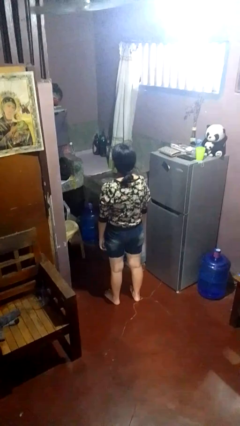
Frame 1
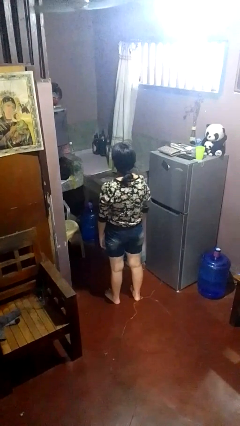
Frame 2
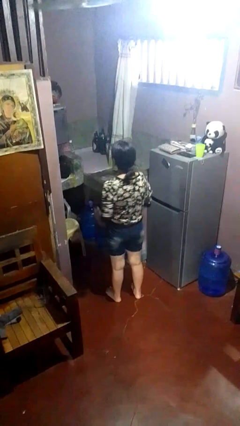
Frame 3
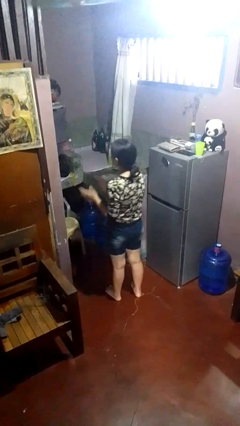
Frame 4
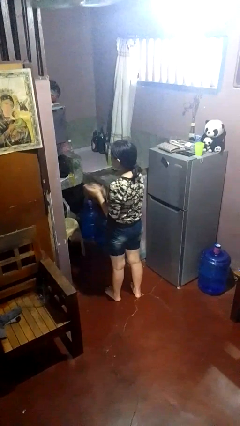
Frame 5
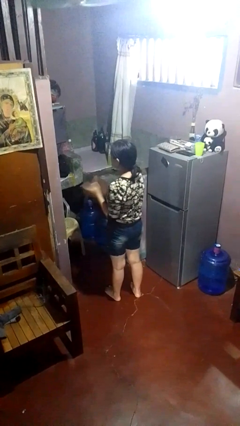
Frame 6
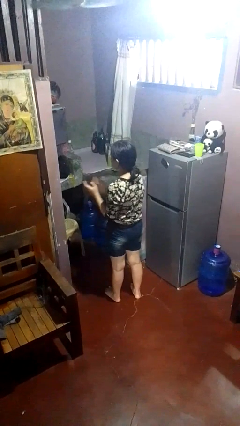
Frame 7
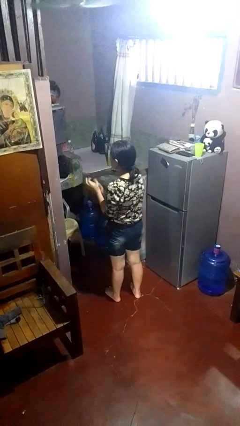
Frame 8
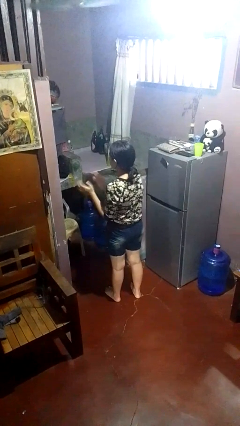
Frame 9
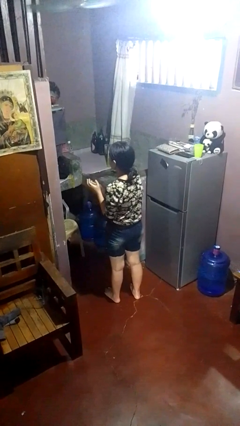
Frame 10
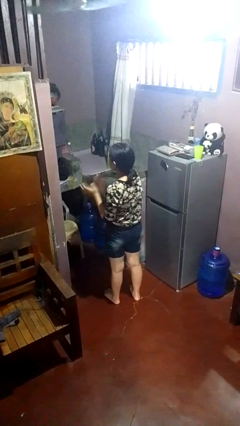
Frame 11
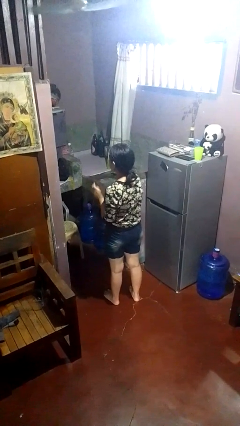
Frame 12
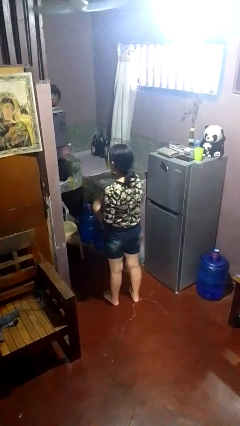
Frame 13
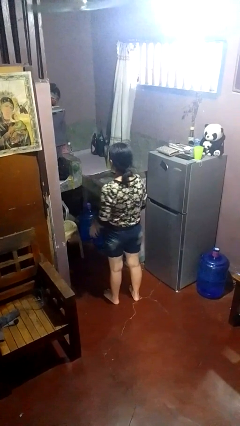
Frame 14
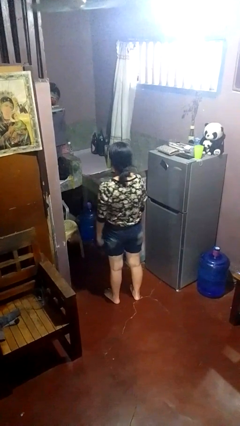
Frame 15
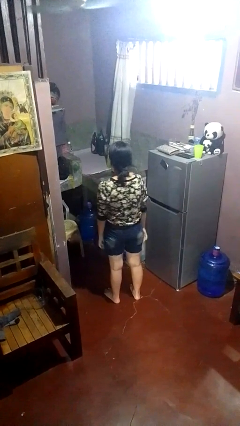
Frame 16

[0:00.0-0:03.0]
person claps hands

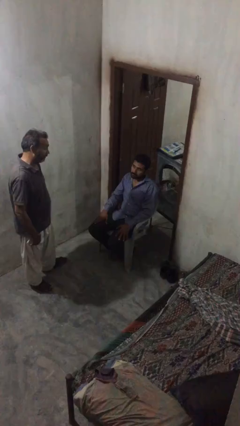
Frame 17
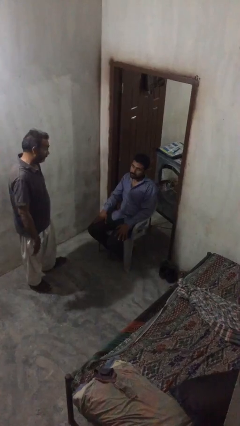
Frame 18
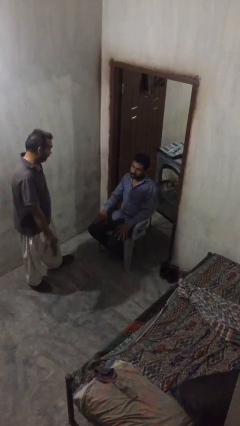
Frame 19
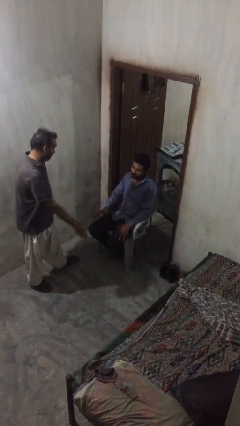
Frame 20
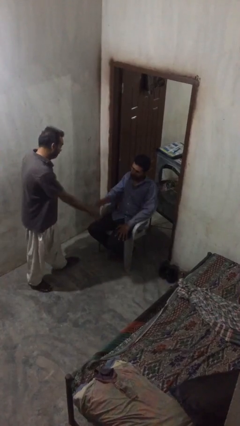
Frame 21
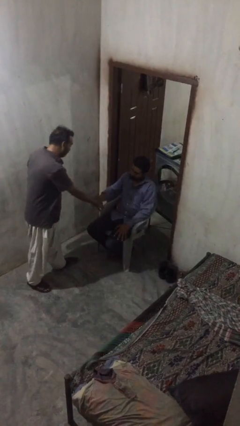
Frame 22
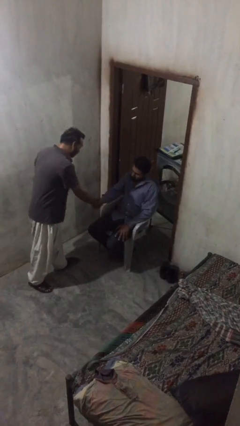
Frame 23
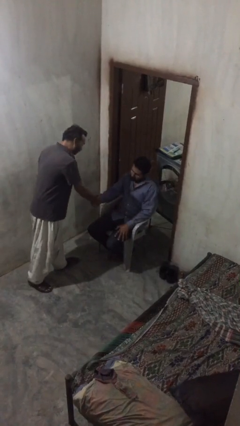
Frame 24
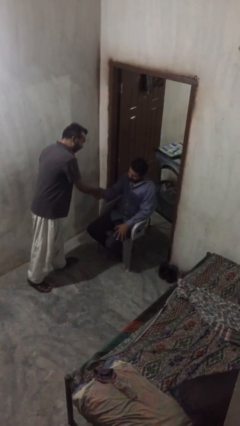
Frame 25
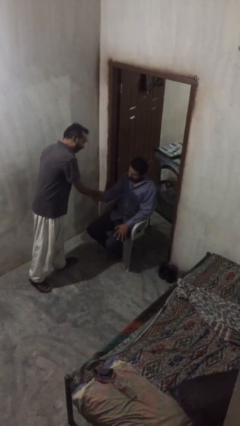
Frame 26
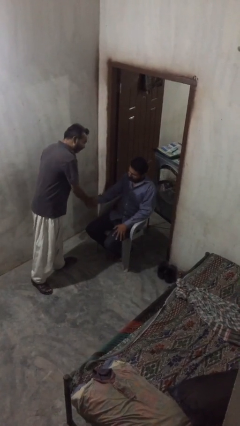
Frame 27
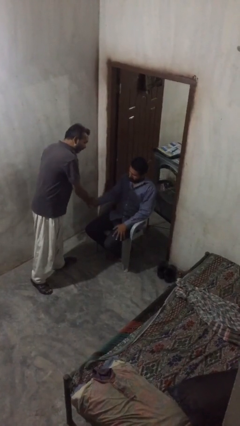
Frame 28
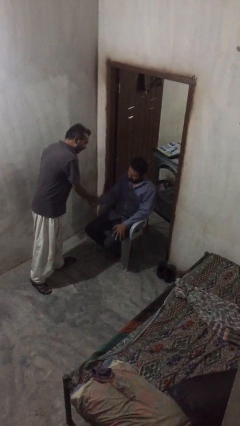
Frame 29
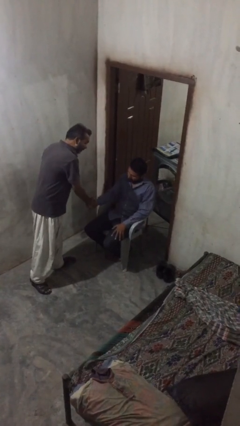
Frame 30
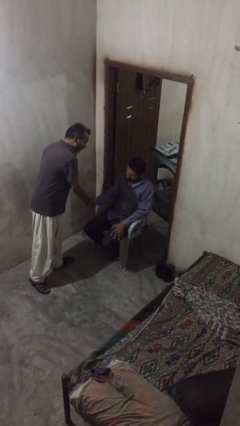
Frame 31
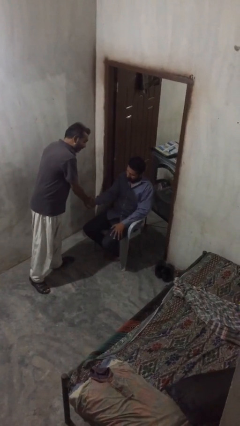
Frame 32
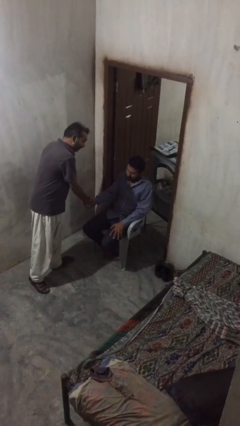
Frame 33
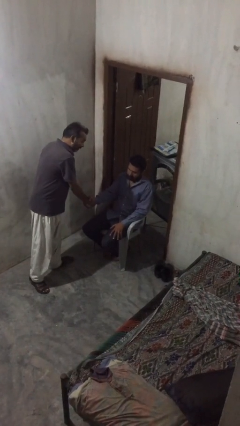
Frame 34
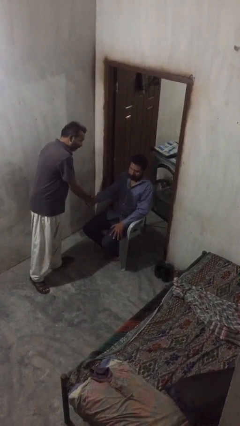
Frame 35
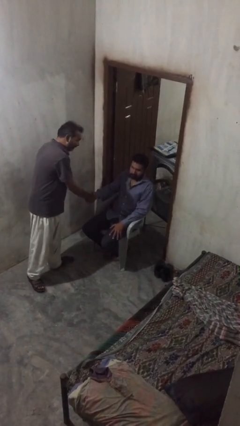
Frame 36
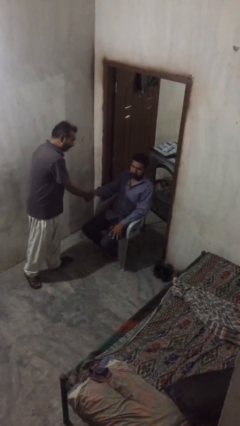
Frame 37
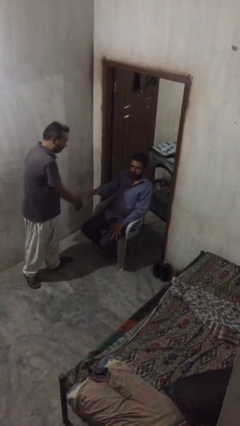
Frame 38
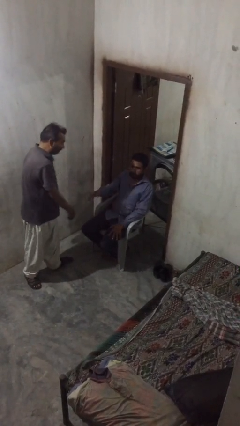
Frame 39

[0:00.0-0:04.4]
person shakes hand

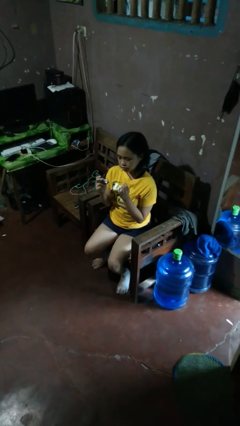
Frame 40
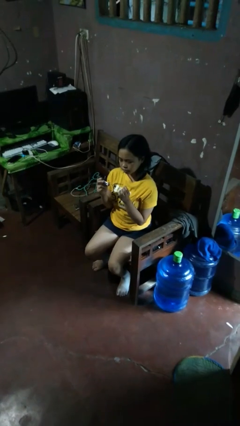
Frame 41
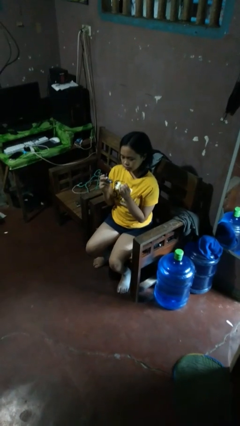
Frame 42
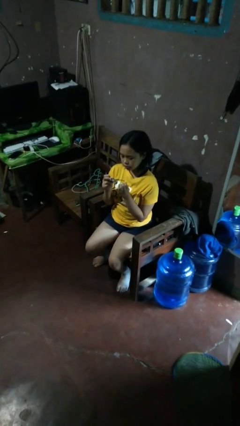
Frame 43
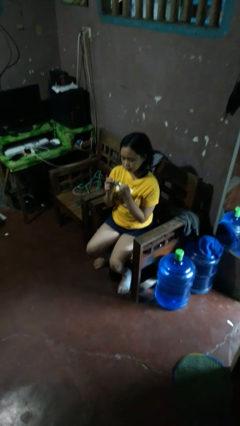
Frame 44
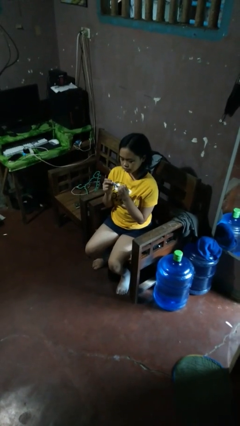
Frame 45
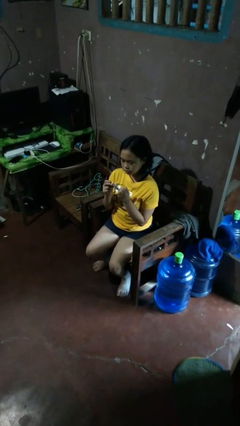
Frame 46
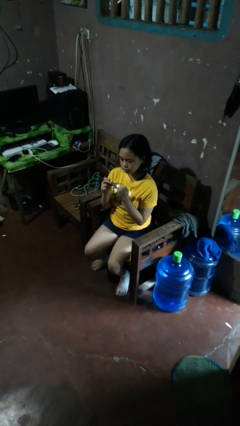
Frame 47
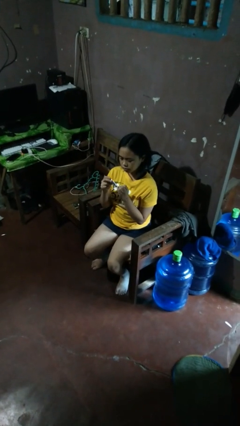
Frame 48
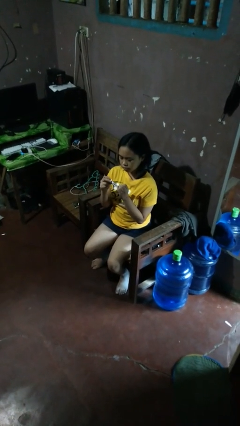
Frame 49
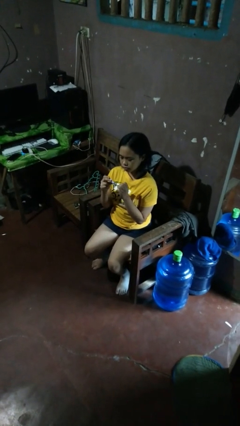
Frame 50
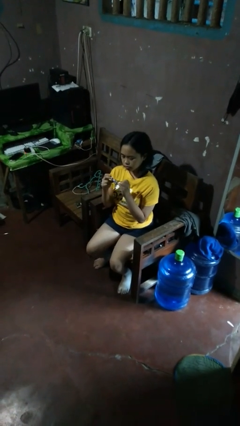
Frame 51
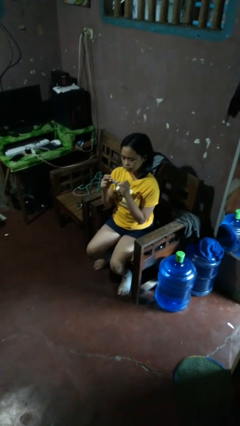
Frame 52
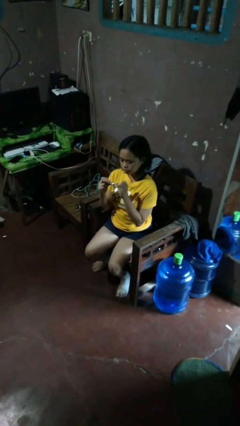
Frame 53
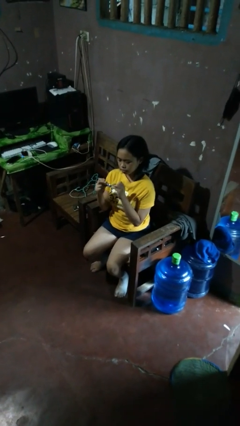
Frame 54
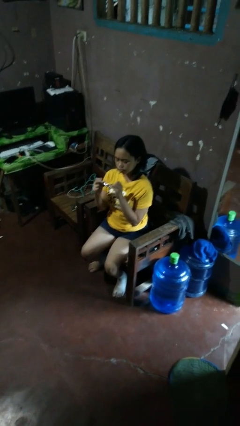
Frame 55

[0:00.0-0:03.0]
person clips fingernails

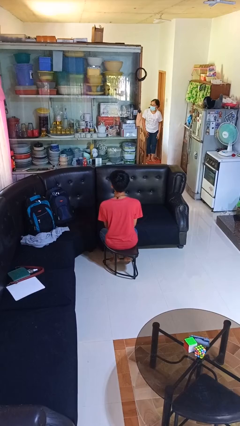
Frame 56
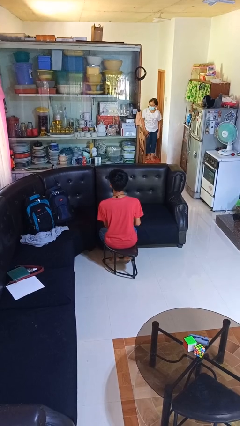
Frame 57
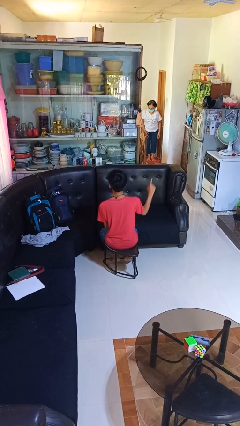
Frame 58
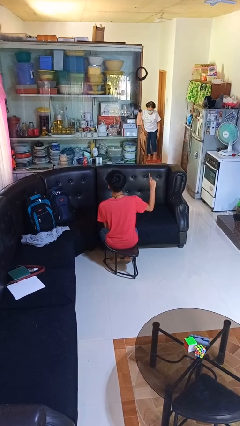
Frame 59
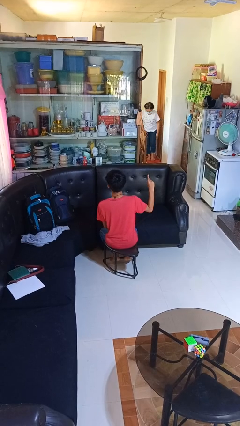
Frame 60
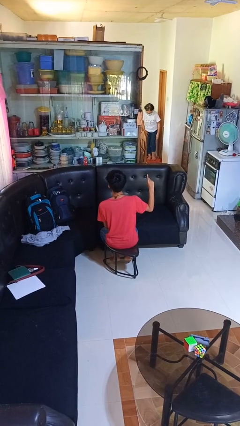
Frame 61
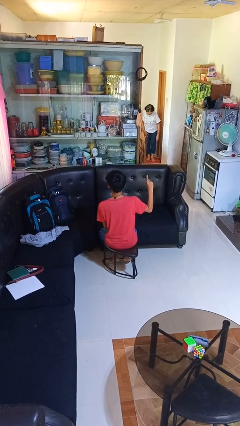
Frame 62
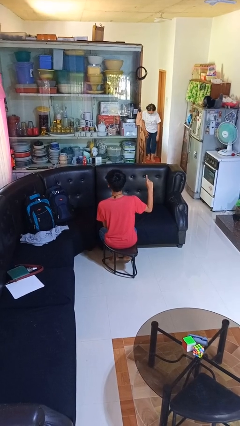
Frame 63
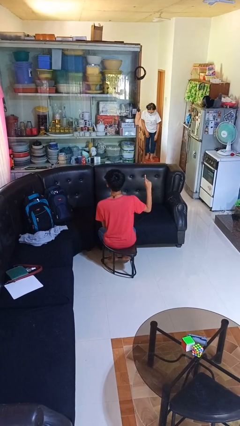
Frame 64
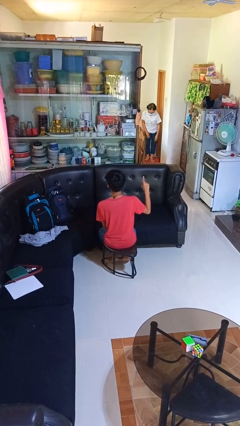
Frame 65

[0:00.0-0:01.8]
person gestures number one

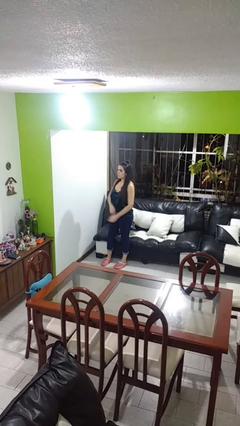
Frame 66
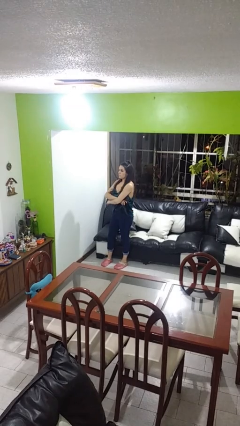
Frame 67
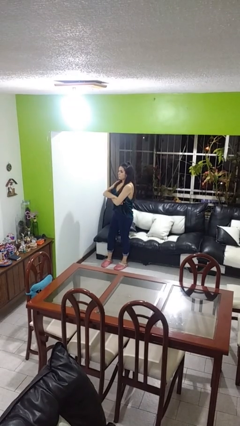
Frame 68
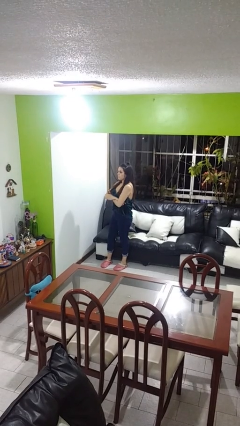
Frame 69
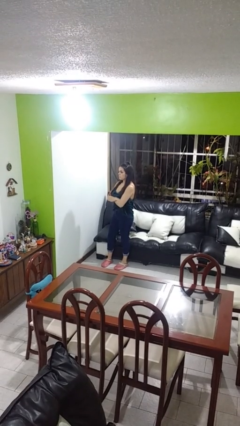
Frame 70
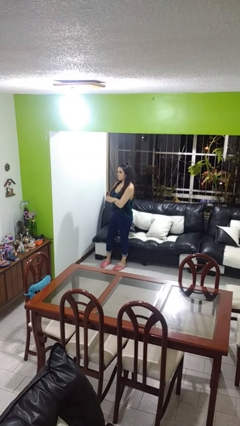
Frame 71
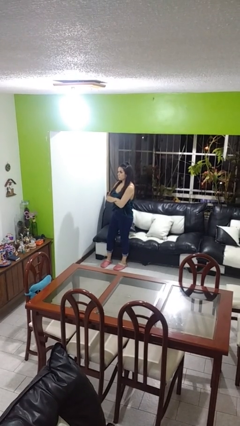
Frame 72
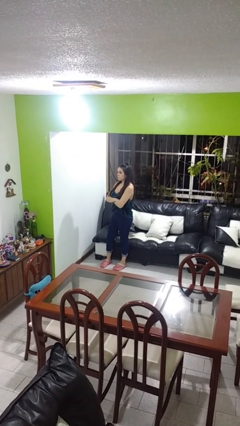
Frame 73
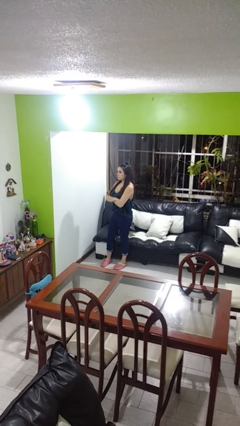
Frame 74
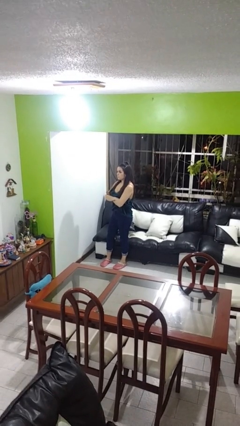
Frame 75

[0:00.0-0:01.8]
person crosses arms

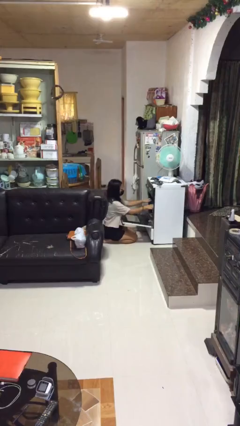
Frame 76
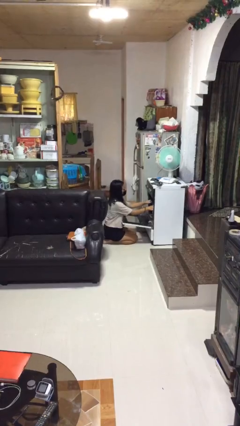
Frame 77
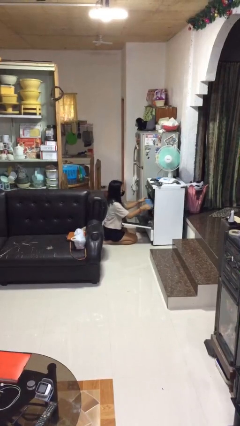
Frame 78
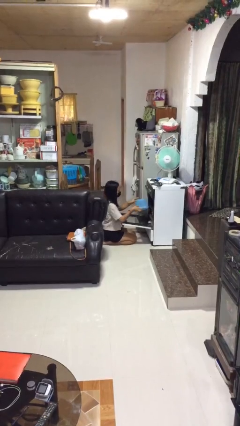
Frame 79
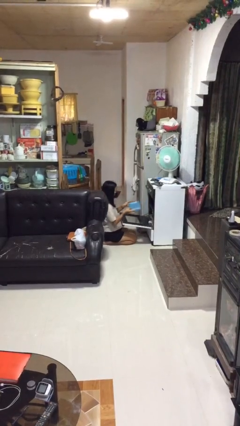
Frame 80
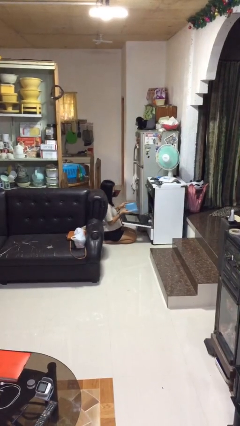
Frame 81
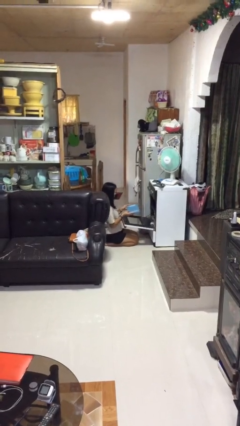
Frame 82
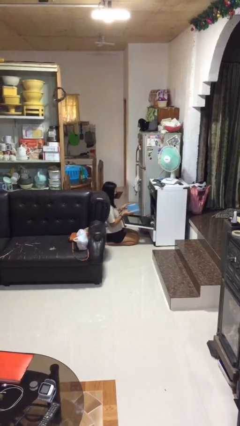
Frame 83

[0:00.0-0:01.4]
person takes object from oven

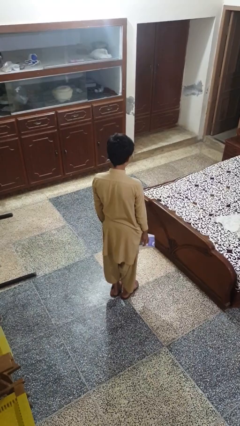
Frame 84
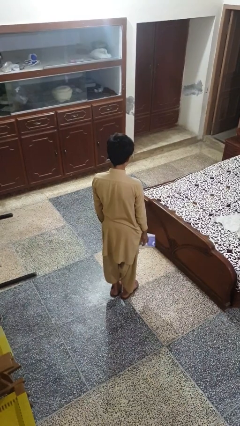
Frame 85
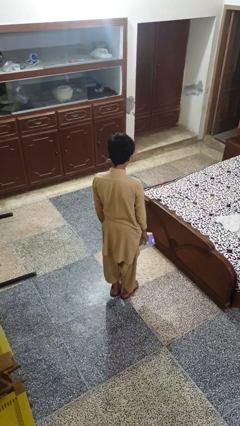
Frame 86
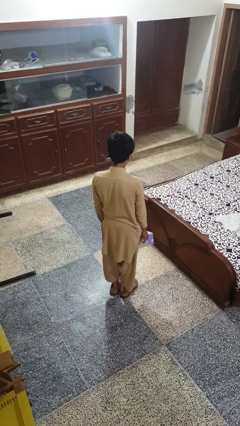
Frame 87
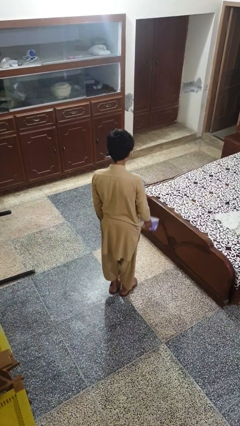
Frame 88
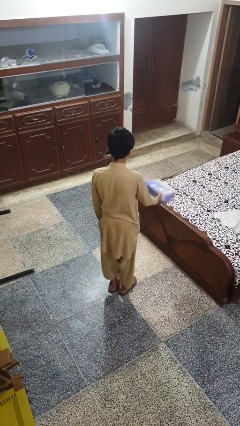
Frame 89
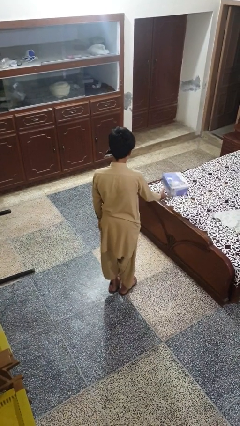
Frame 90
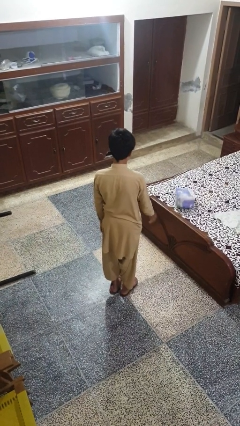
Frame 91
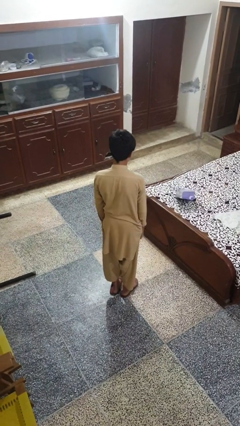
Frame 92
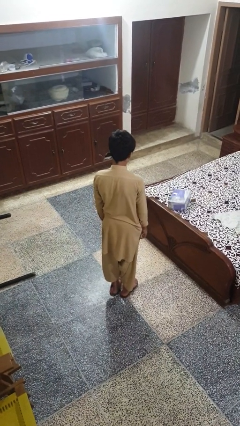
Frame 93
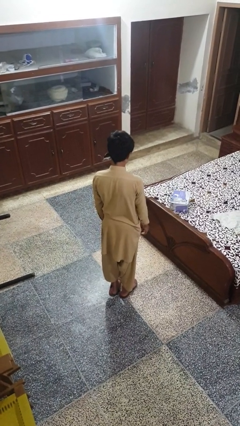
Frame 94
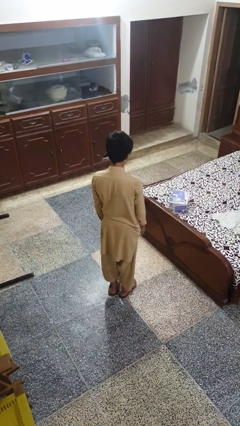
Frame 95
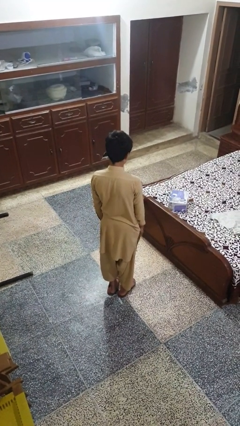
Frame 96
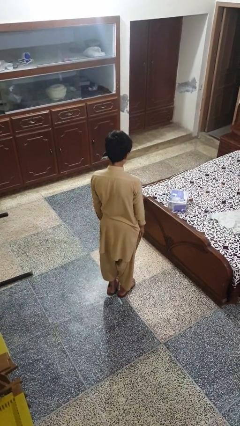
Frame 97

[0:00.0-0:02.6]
person throws object on bed
